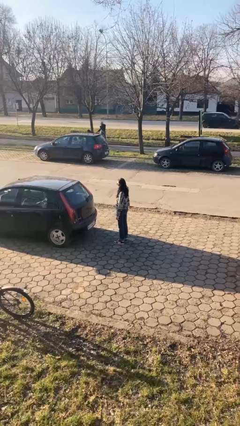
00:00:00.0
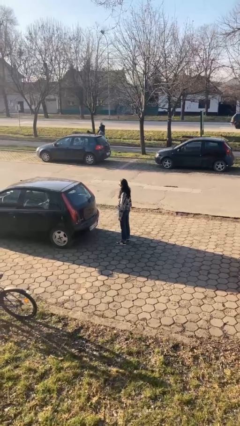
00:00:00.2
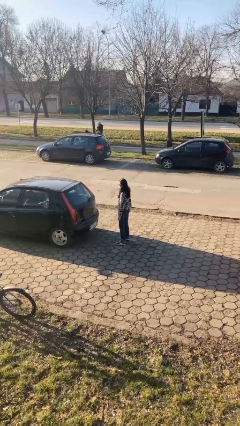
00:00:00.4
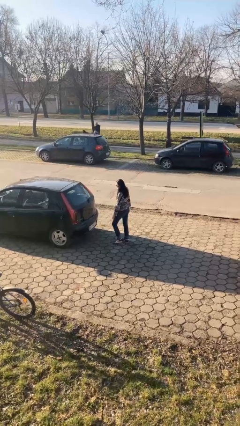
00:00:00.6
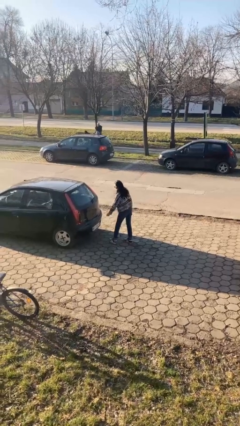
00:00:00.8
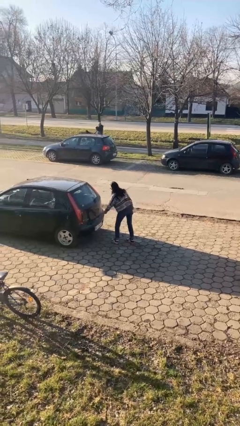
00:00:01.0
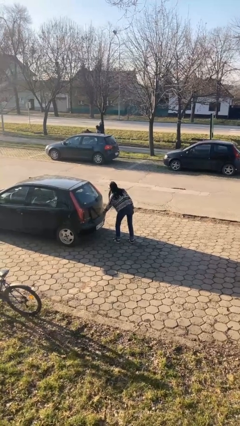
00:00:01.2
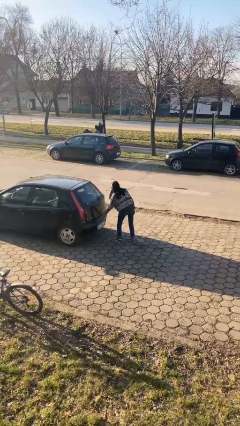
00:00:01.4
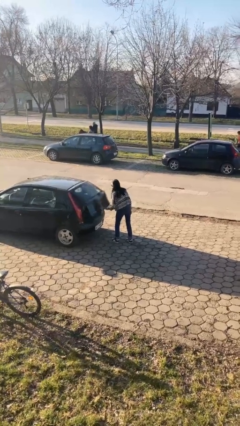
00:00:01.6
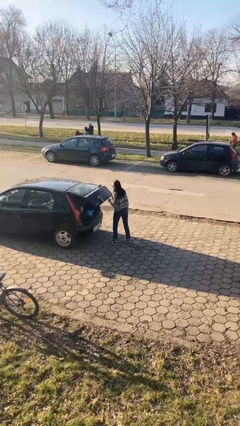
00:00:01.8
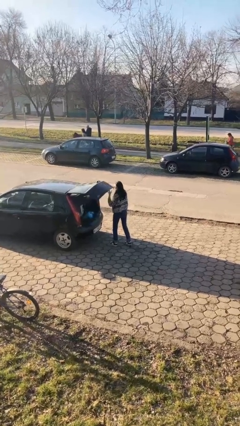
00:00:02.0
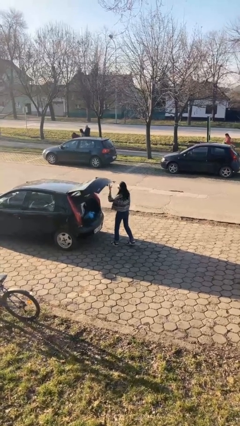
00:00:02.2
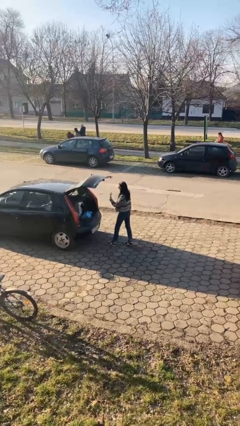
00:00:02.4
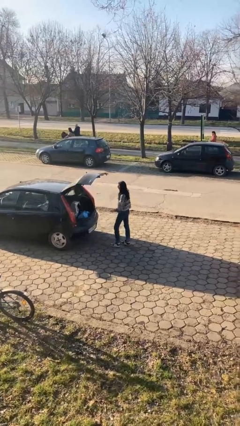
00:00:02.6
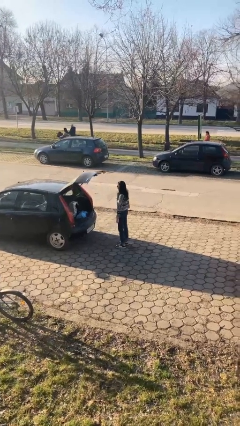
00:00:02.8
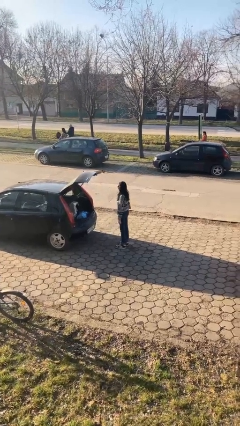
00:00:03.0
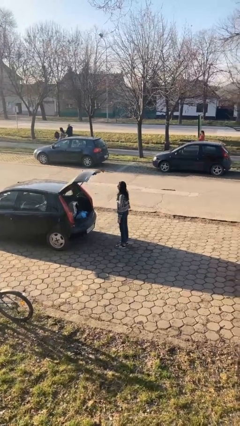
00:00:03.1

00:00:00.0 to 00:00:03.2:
person opens car trunk

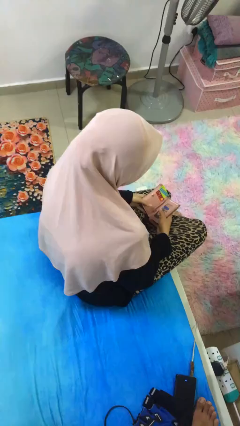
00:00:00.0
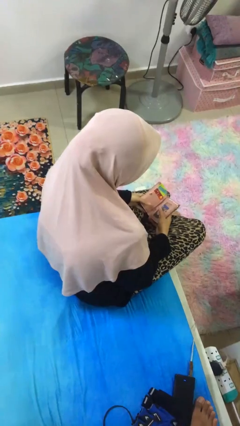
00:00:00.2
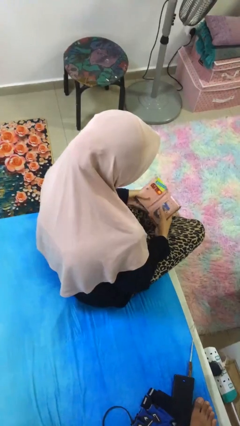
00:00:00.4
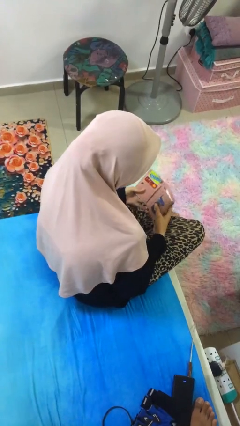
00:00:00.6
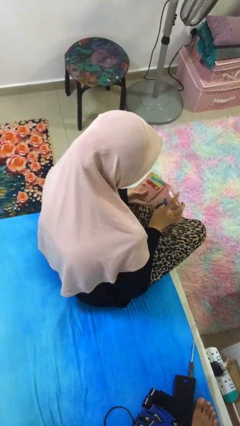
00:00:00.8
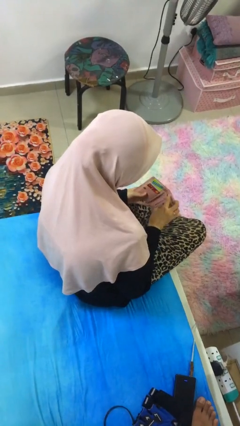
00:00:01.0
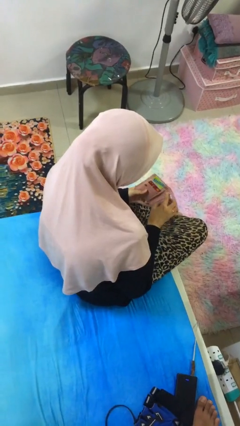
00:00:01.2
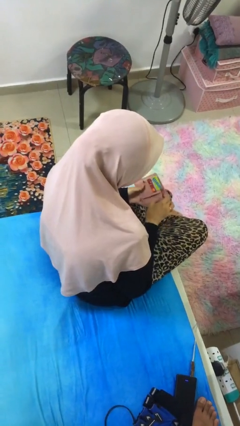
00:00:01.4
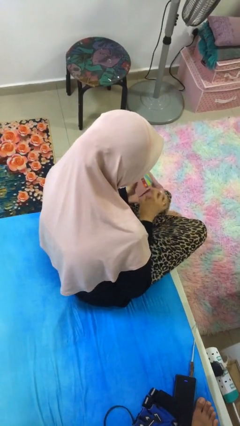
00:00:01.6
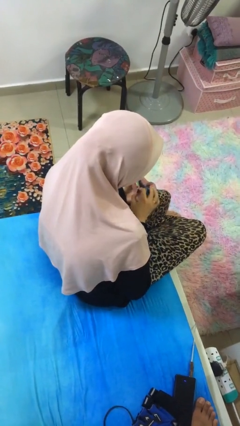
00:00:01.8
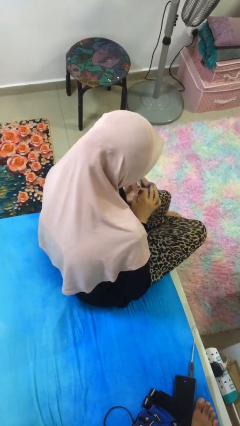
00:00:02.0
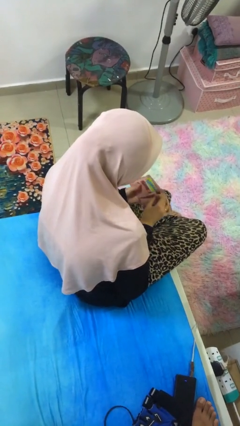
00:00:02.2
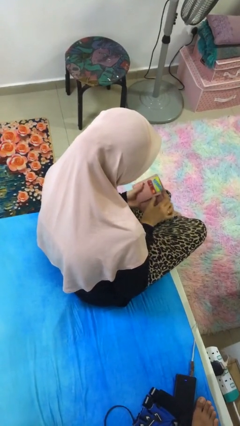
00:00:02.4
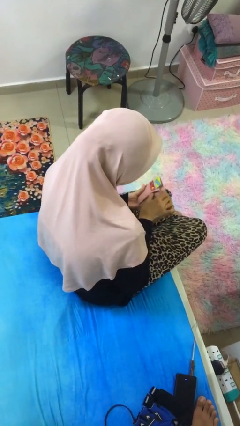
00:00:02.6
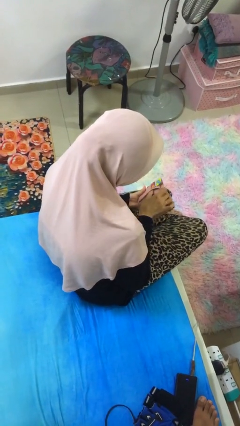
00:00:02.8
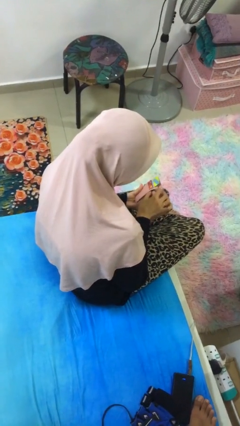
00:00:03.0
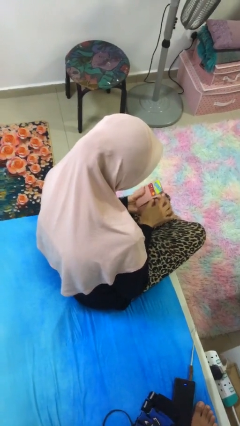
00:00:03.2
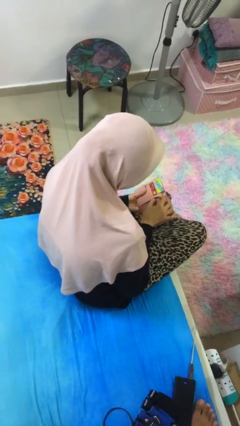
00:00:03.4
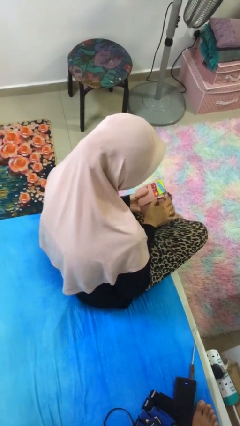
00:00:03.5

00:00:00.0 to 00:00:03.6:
person searches in purse

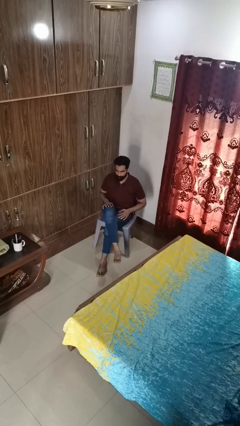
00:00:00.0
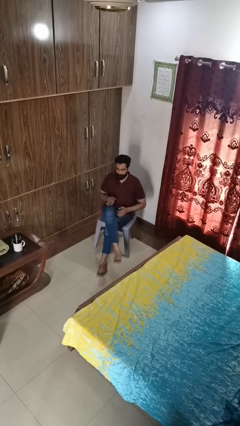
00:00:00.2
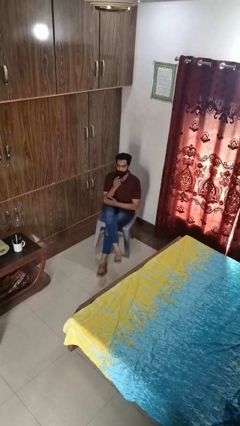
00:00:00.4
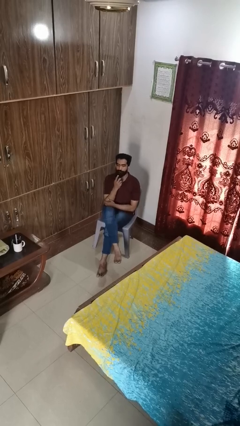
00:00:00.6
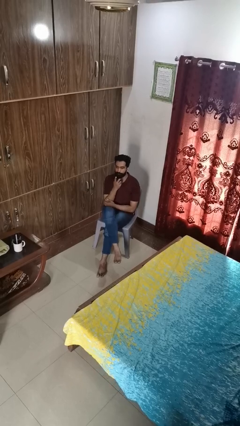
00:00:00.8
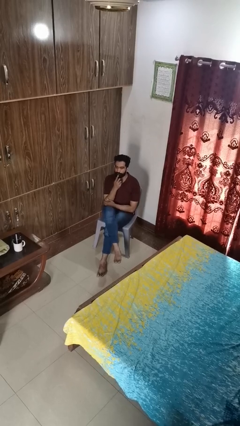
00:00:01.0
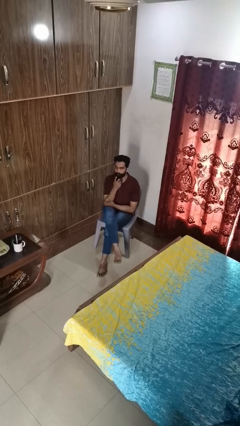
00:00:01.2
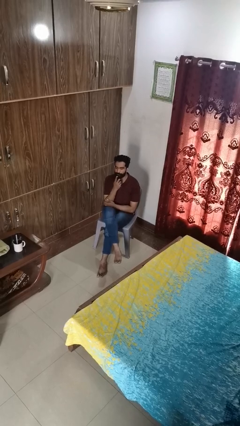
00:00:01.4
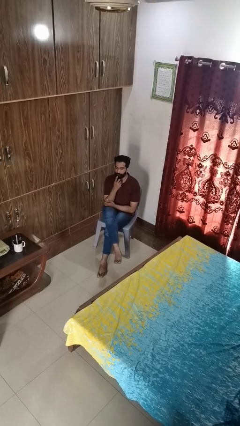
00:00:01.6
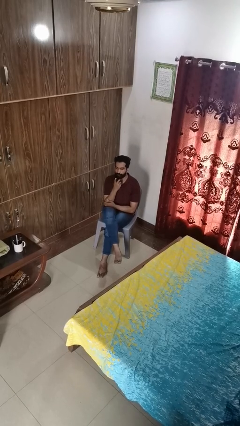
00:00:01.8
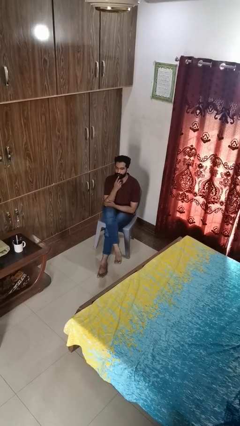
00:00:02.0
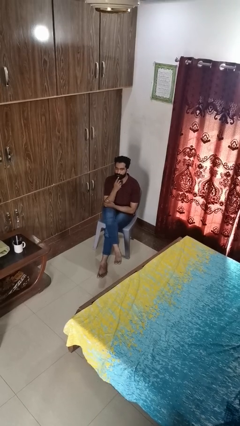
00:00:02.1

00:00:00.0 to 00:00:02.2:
person strokes chin

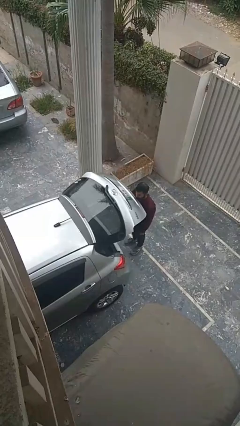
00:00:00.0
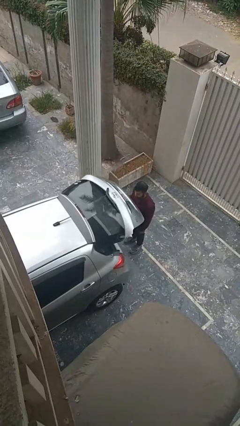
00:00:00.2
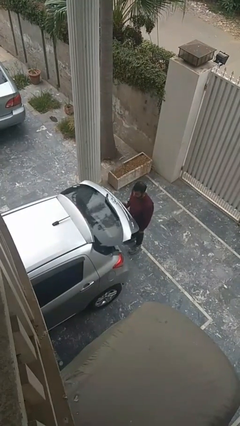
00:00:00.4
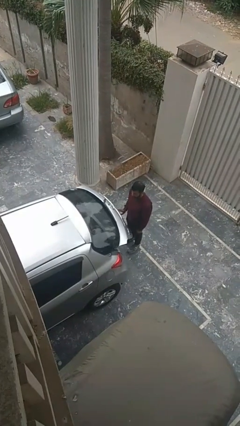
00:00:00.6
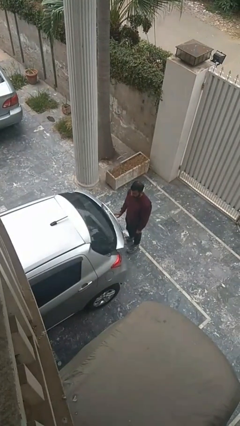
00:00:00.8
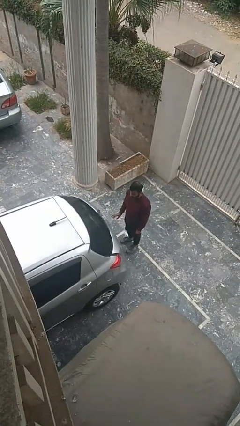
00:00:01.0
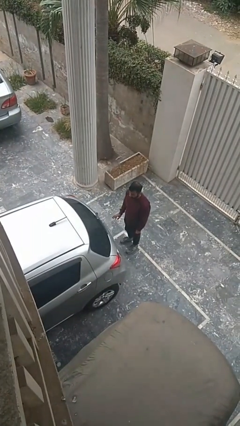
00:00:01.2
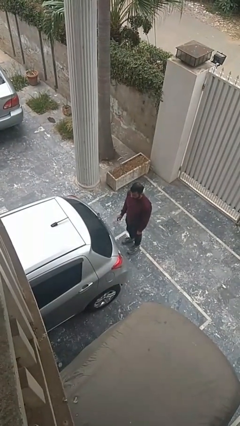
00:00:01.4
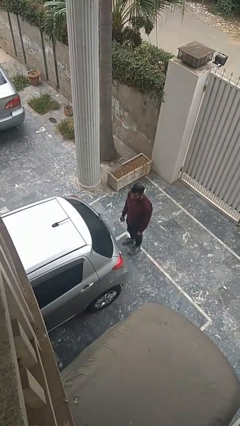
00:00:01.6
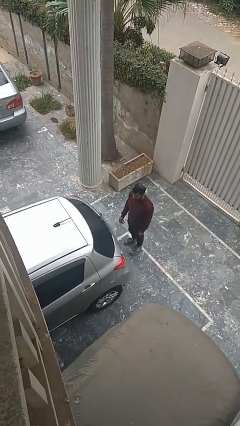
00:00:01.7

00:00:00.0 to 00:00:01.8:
person closes car trunk

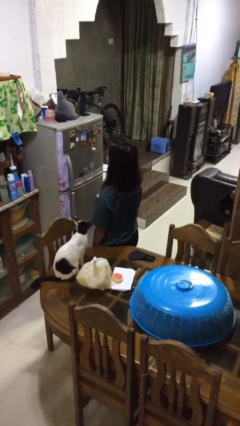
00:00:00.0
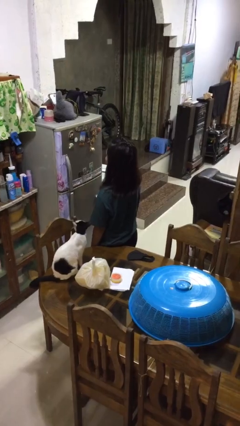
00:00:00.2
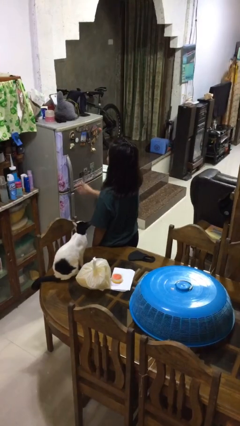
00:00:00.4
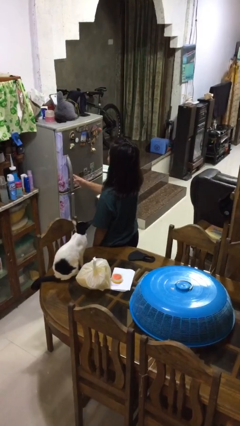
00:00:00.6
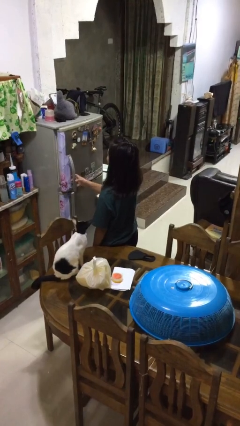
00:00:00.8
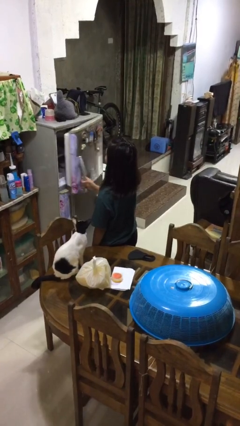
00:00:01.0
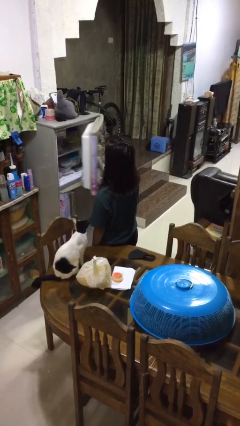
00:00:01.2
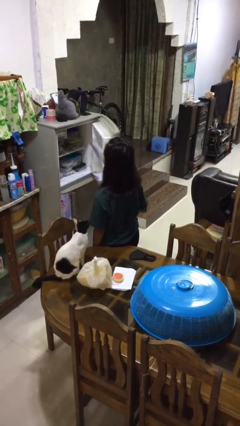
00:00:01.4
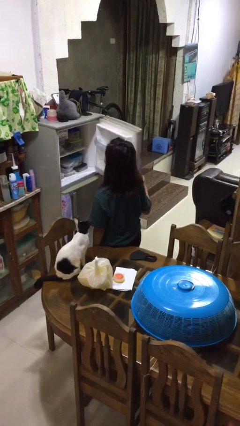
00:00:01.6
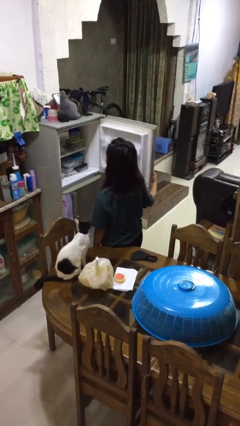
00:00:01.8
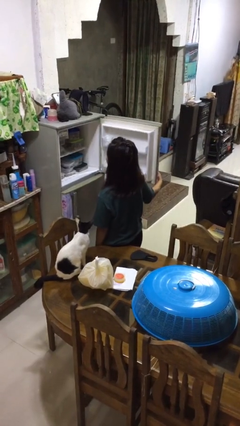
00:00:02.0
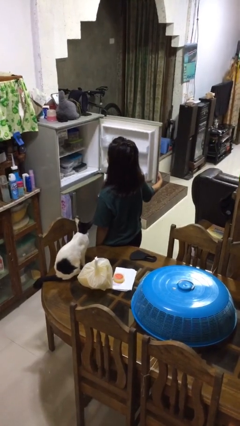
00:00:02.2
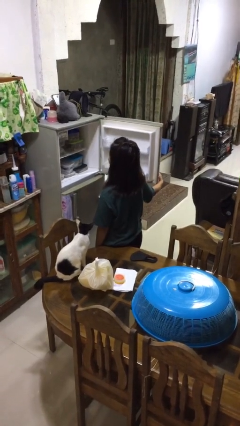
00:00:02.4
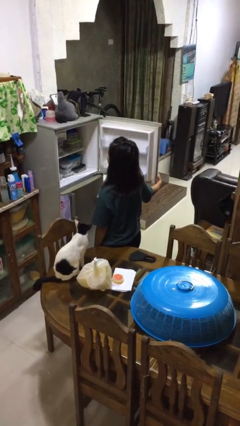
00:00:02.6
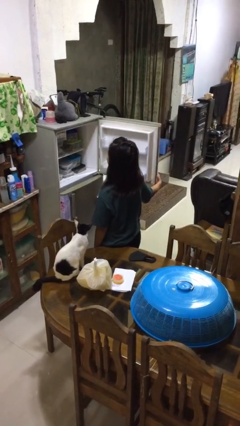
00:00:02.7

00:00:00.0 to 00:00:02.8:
person opens refrigerator

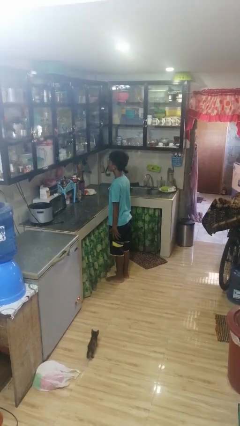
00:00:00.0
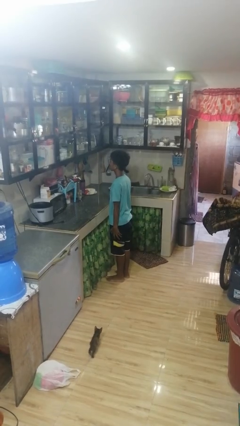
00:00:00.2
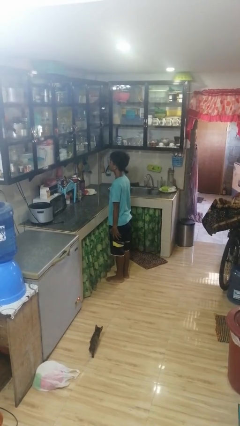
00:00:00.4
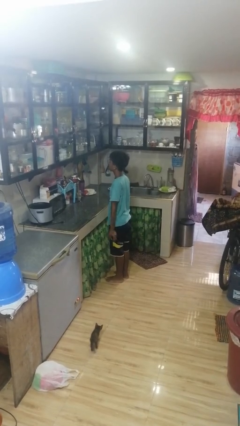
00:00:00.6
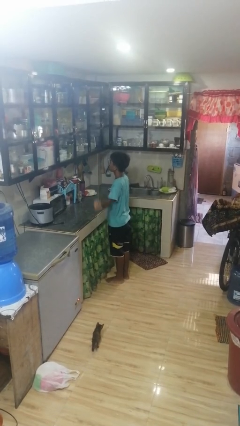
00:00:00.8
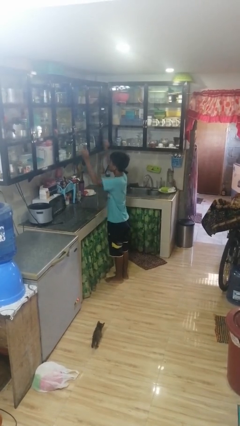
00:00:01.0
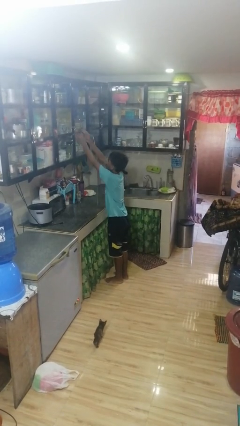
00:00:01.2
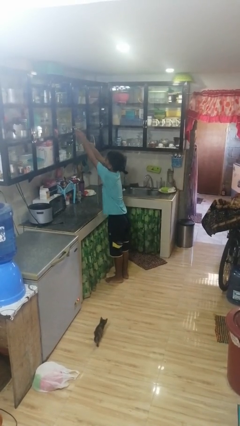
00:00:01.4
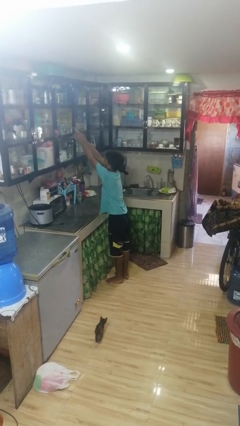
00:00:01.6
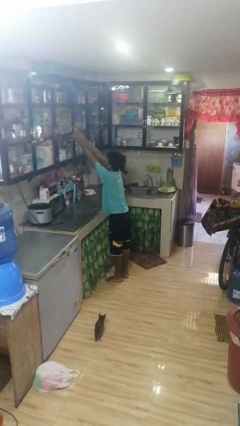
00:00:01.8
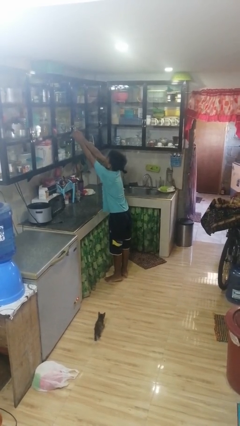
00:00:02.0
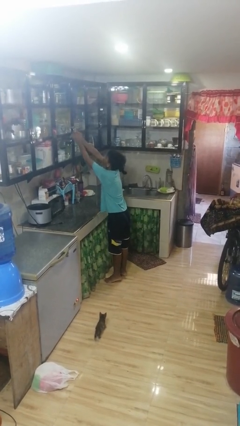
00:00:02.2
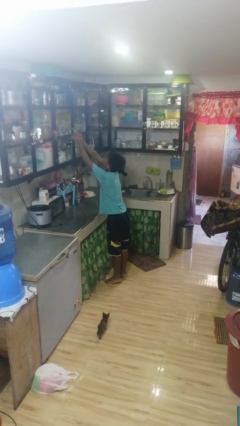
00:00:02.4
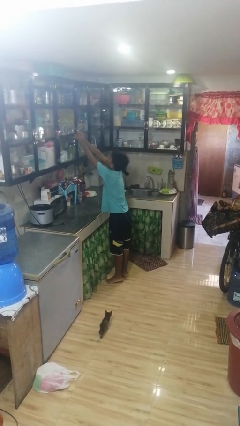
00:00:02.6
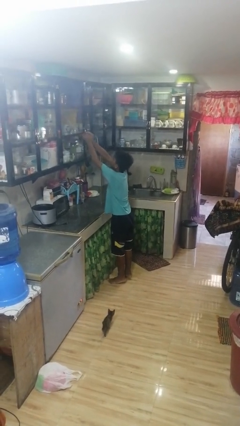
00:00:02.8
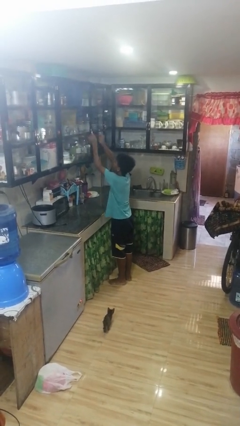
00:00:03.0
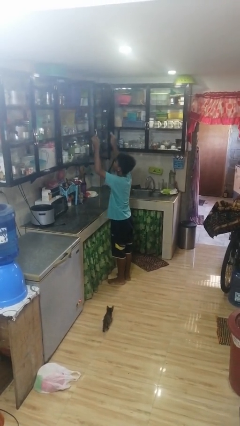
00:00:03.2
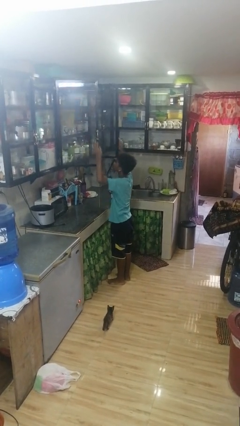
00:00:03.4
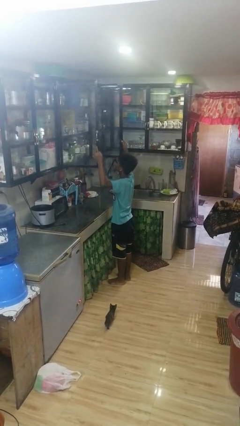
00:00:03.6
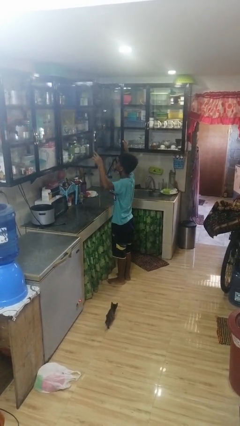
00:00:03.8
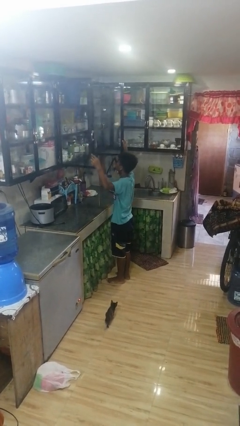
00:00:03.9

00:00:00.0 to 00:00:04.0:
person opens cabinet
